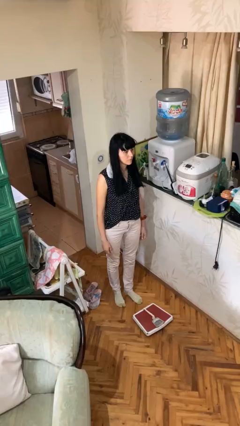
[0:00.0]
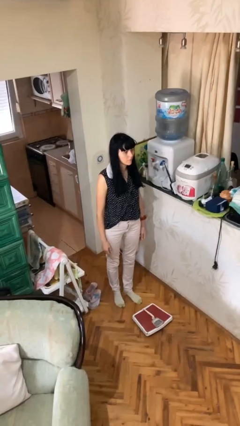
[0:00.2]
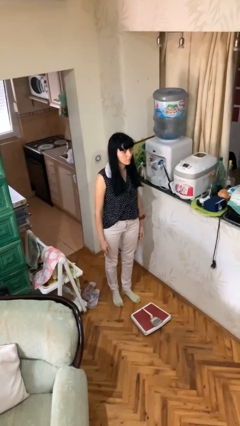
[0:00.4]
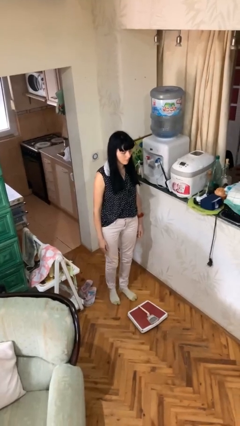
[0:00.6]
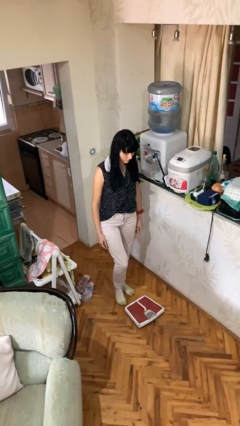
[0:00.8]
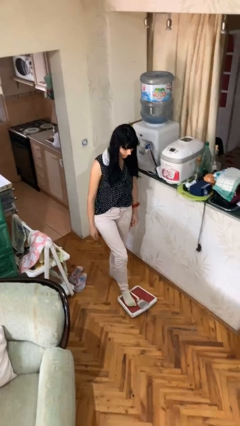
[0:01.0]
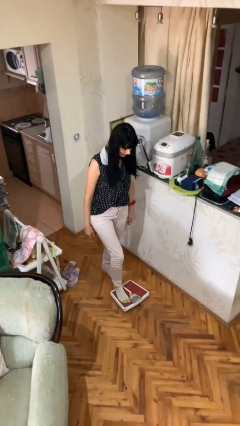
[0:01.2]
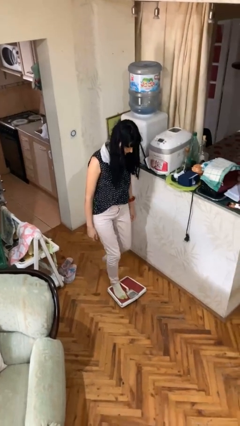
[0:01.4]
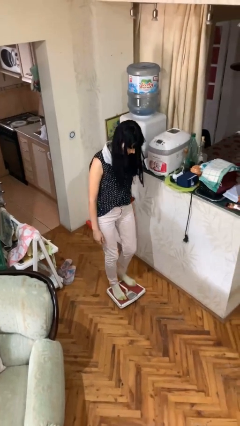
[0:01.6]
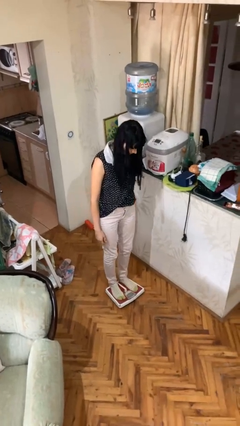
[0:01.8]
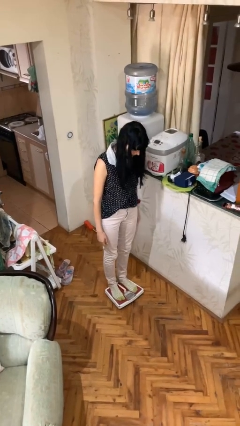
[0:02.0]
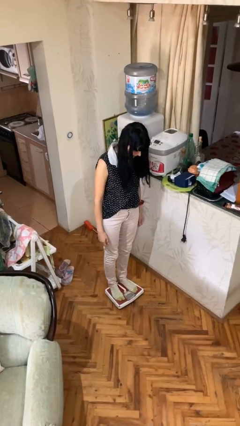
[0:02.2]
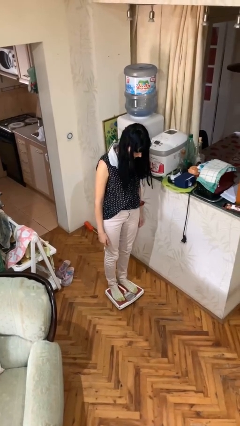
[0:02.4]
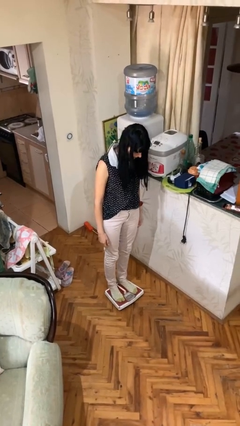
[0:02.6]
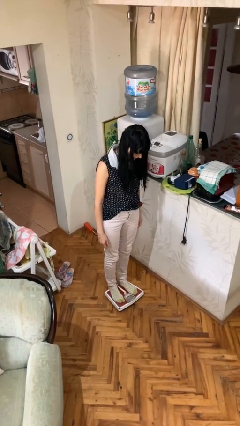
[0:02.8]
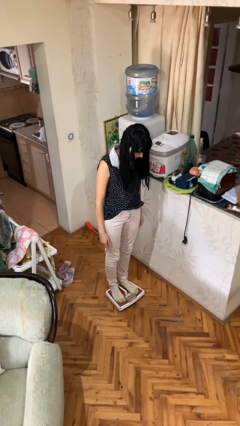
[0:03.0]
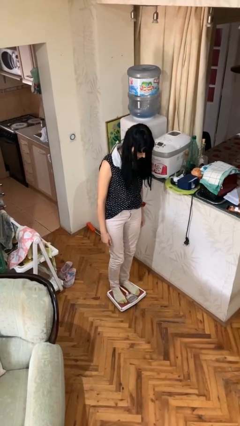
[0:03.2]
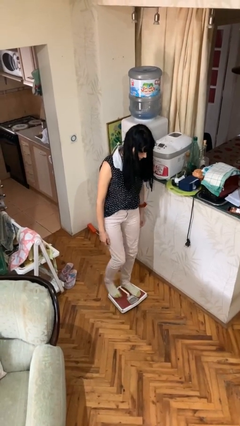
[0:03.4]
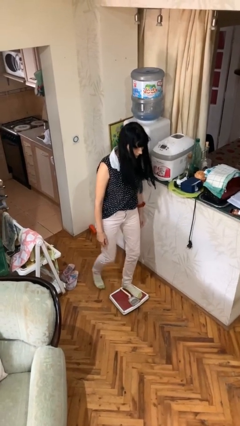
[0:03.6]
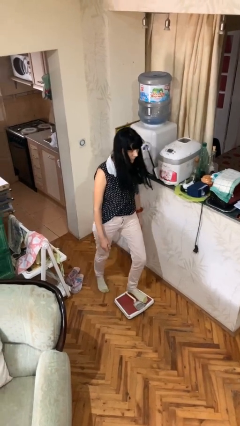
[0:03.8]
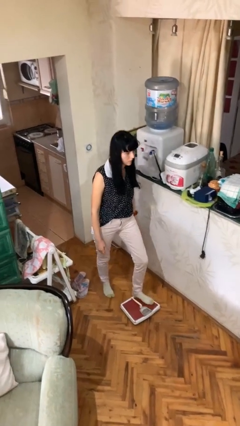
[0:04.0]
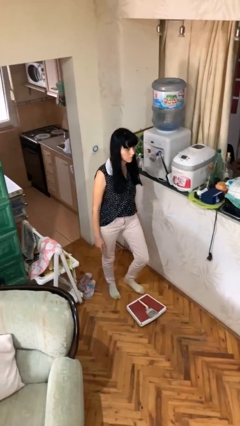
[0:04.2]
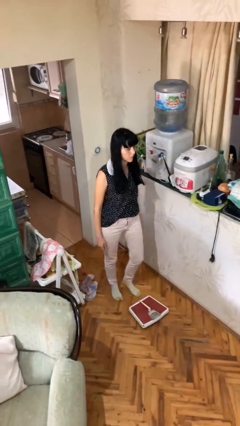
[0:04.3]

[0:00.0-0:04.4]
person uses bodyweight scale

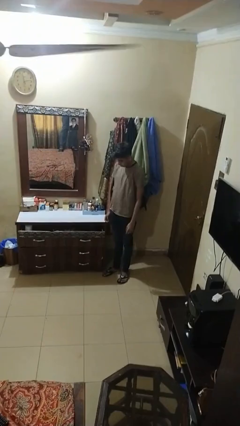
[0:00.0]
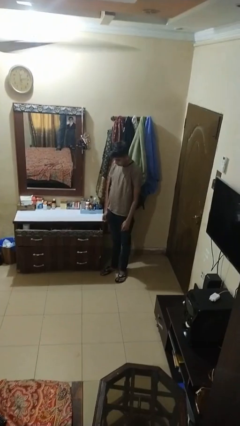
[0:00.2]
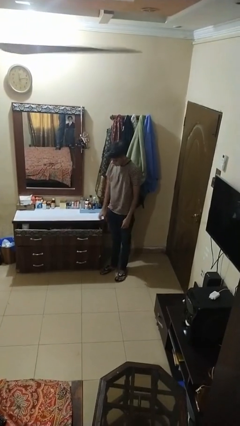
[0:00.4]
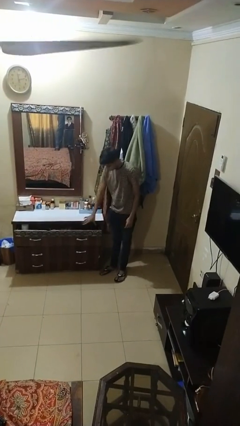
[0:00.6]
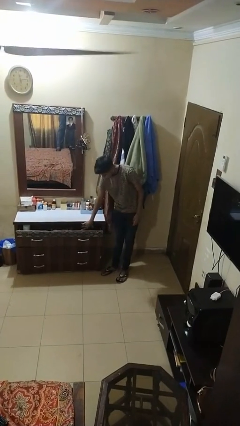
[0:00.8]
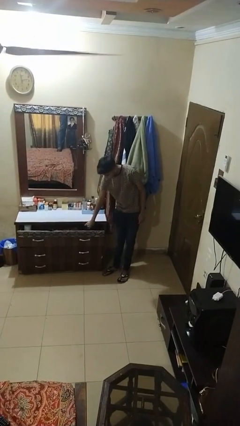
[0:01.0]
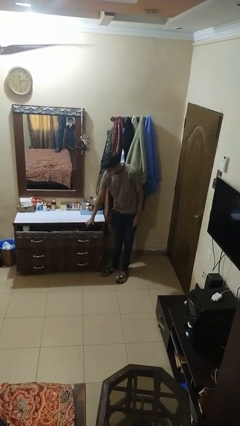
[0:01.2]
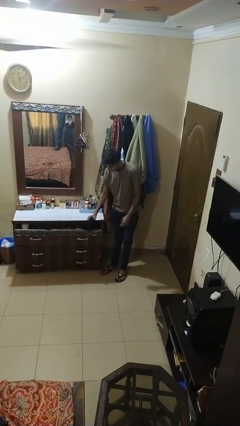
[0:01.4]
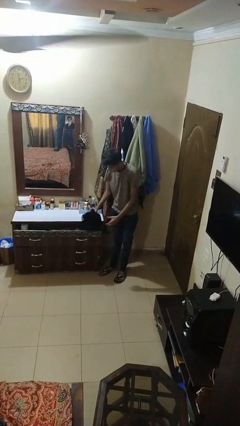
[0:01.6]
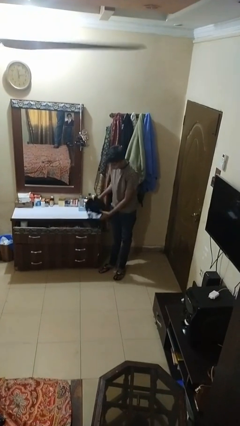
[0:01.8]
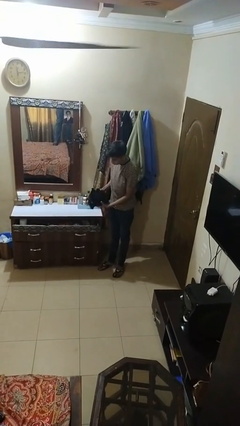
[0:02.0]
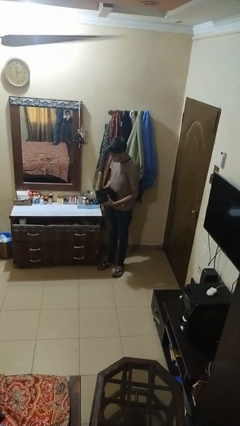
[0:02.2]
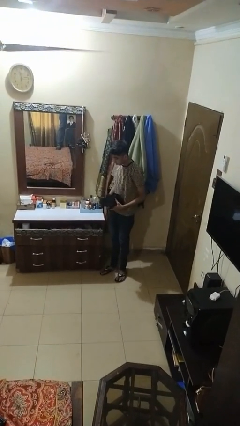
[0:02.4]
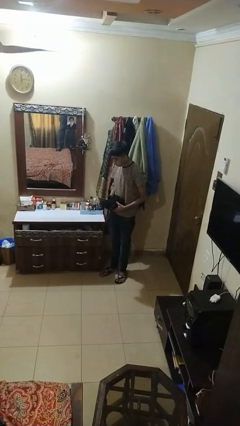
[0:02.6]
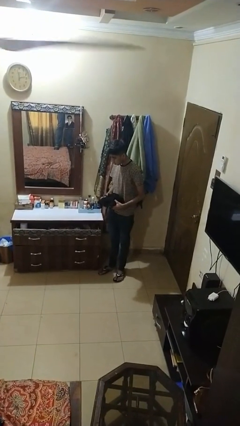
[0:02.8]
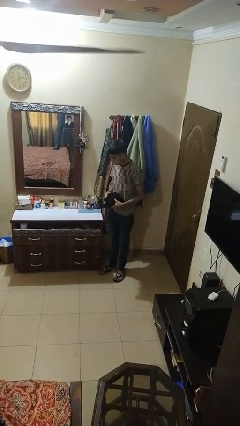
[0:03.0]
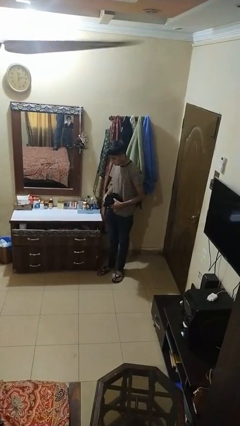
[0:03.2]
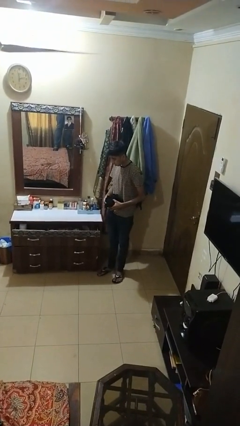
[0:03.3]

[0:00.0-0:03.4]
person takes clothes from dresser

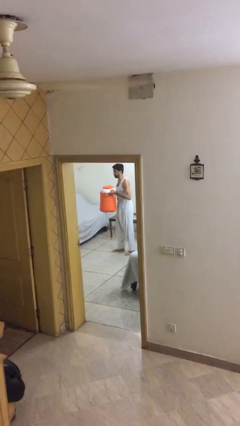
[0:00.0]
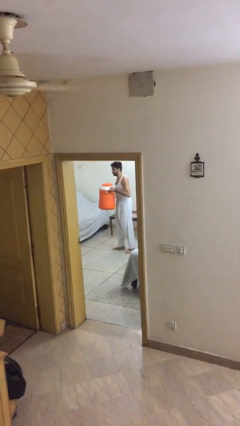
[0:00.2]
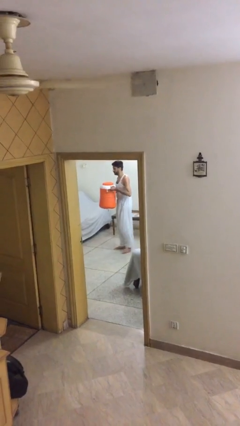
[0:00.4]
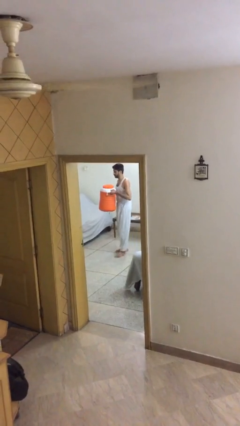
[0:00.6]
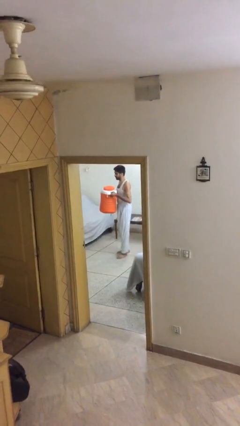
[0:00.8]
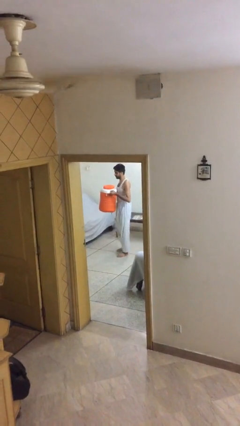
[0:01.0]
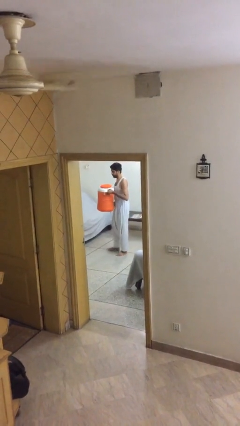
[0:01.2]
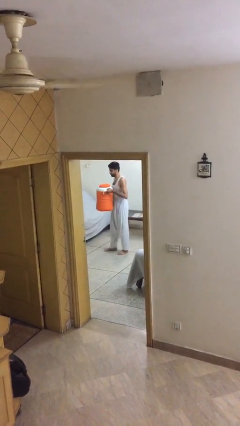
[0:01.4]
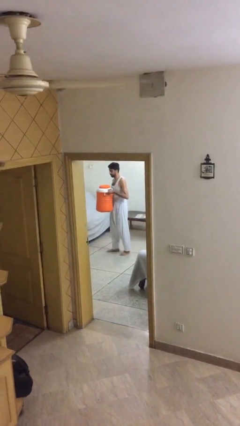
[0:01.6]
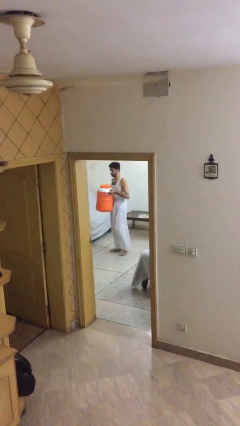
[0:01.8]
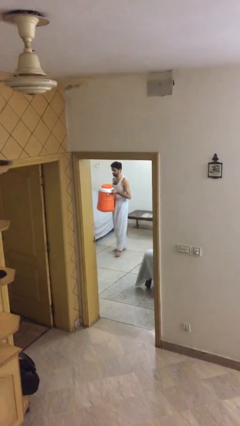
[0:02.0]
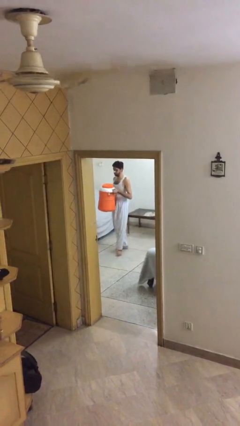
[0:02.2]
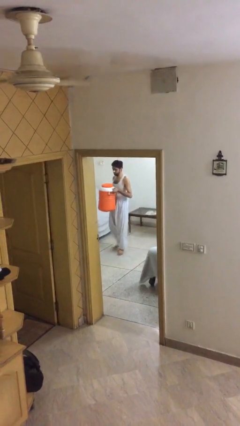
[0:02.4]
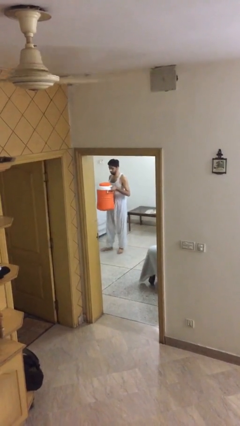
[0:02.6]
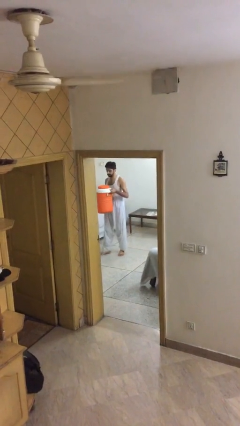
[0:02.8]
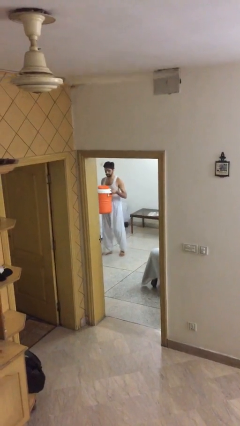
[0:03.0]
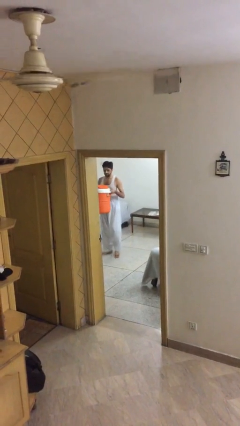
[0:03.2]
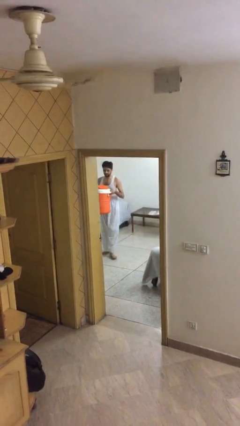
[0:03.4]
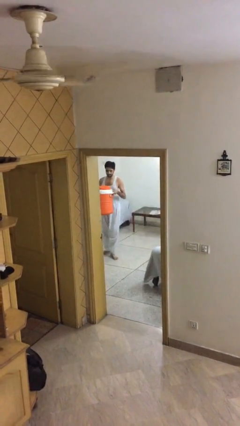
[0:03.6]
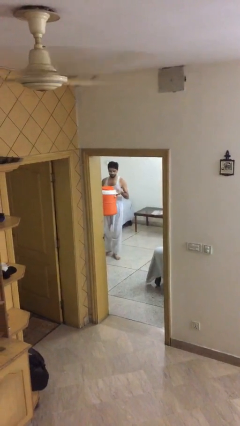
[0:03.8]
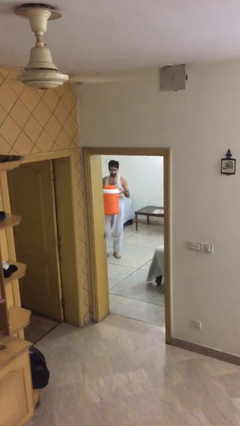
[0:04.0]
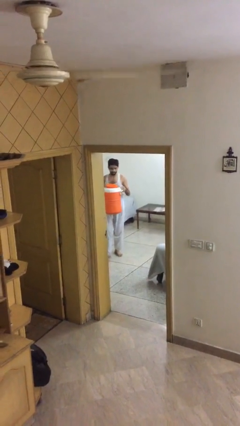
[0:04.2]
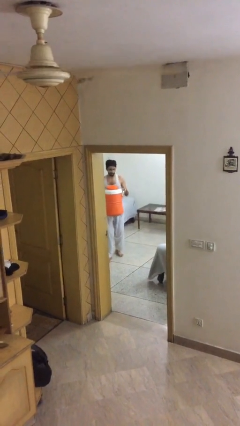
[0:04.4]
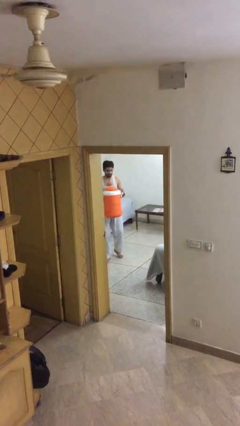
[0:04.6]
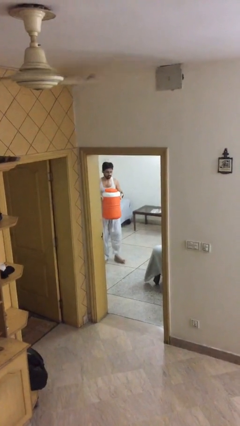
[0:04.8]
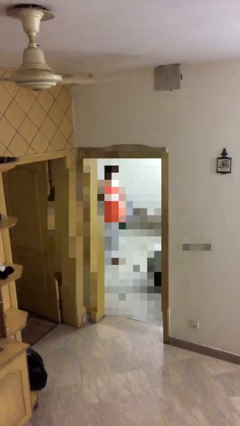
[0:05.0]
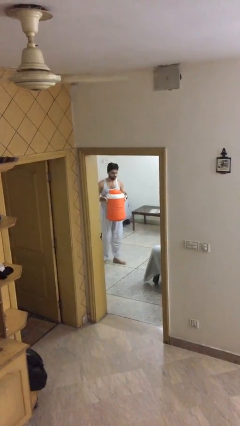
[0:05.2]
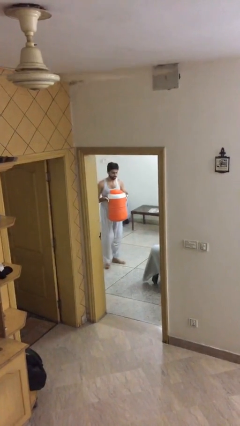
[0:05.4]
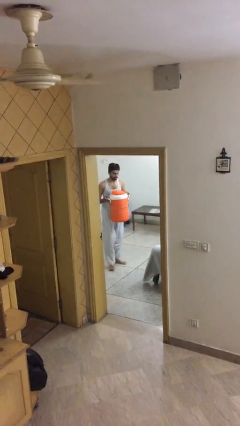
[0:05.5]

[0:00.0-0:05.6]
person carries heavy object

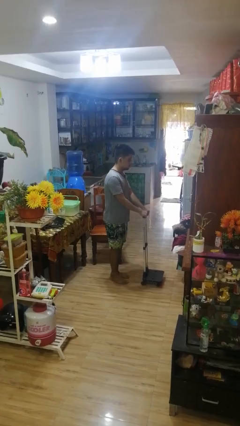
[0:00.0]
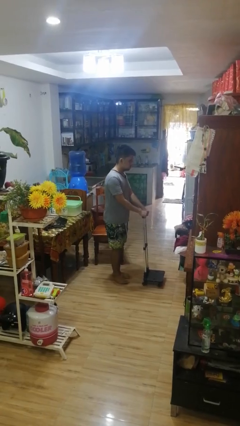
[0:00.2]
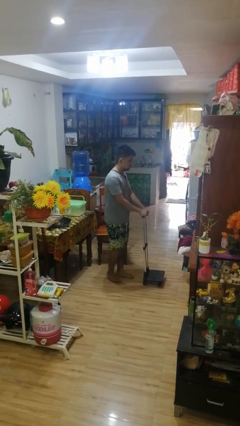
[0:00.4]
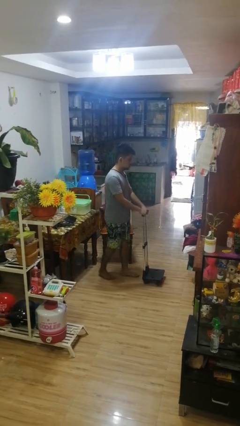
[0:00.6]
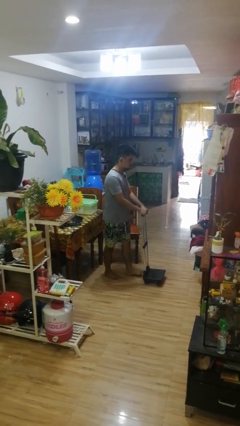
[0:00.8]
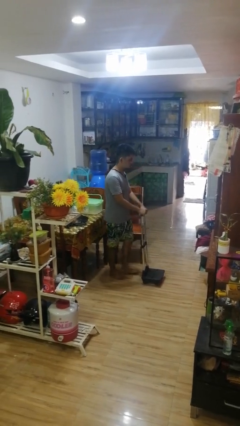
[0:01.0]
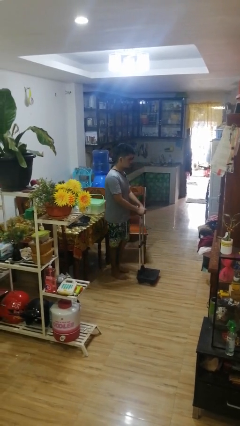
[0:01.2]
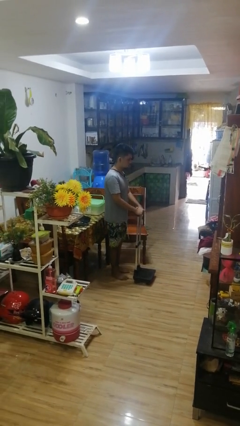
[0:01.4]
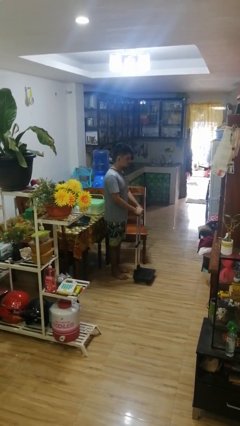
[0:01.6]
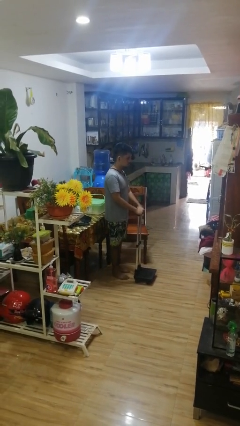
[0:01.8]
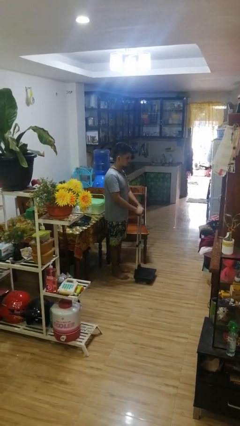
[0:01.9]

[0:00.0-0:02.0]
person pulls wheeled cart

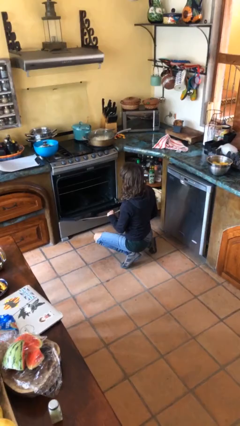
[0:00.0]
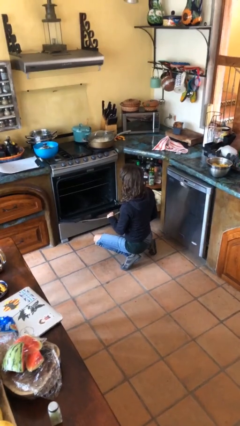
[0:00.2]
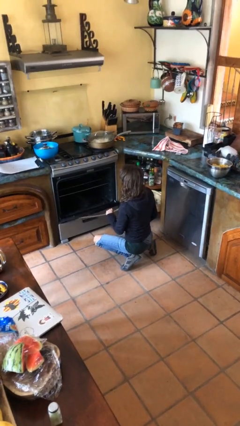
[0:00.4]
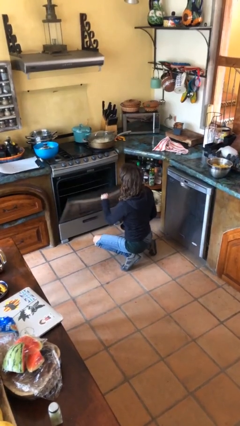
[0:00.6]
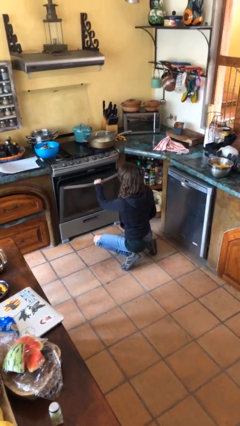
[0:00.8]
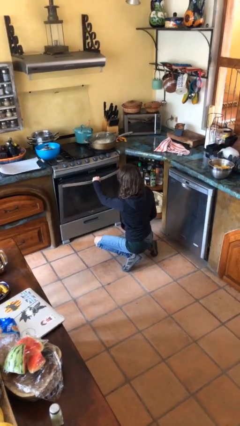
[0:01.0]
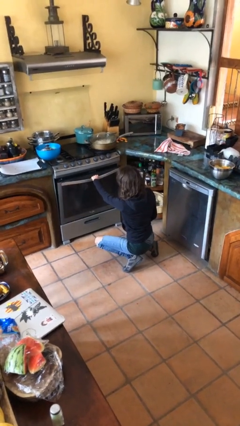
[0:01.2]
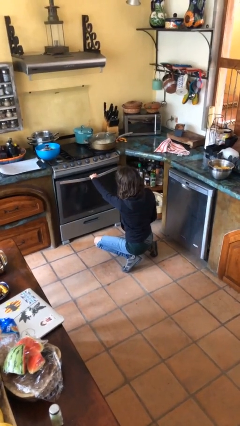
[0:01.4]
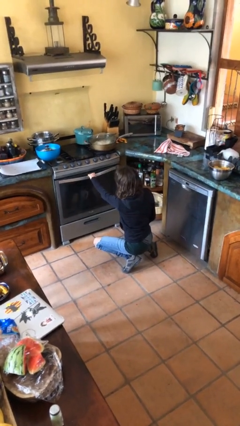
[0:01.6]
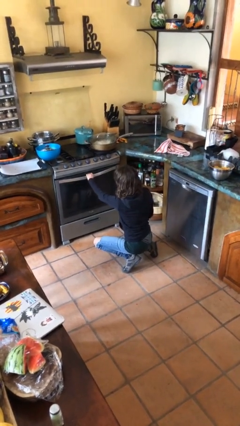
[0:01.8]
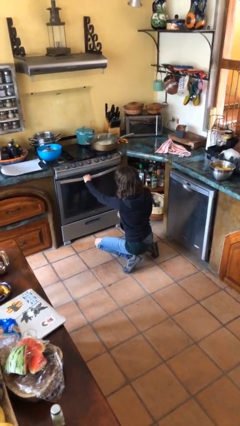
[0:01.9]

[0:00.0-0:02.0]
person closes oven door
